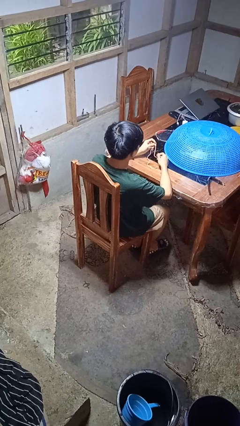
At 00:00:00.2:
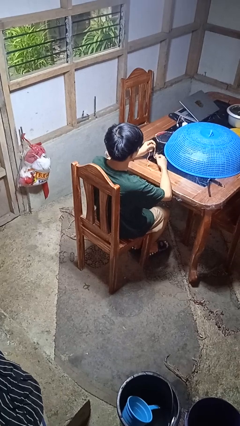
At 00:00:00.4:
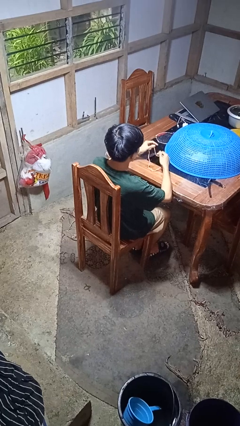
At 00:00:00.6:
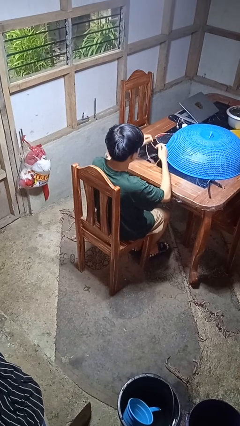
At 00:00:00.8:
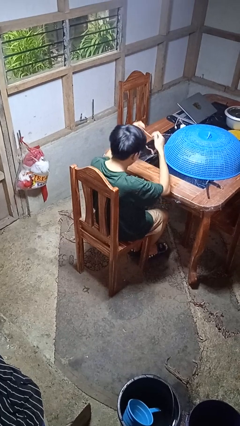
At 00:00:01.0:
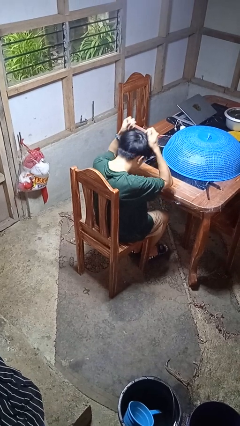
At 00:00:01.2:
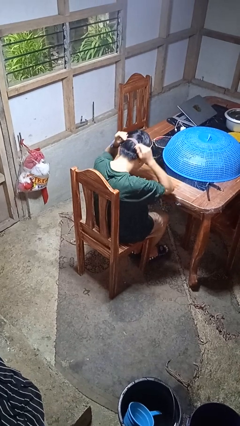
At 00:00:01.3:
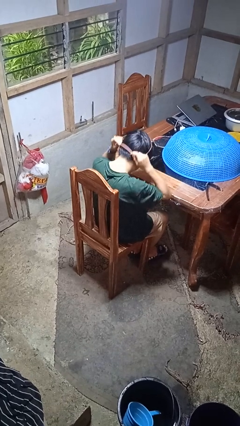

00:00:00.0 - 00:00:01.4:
person puts on necklace

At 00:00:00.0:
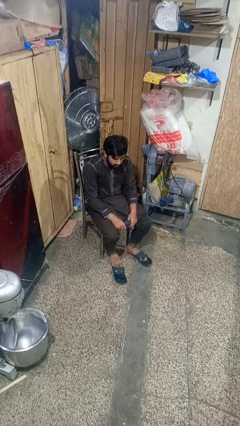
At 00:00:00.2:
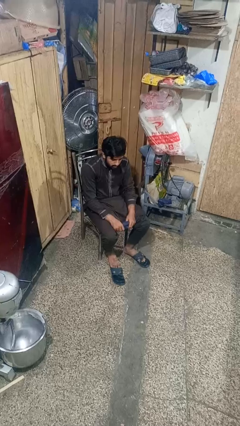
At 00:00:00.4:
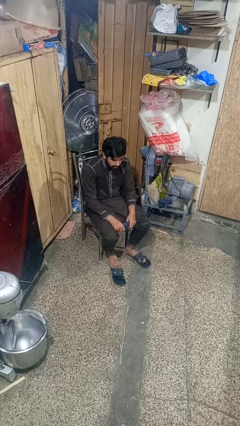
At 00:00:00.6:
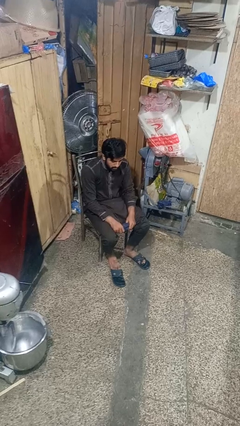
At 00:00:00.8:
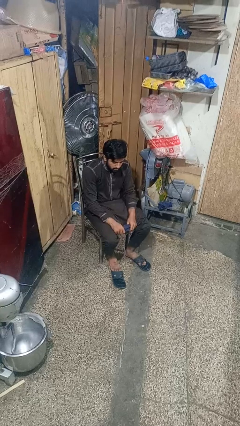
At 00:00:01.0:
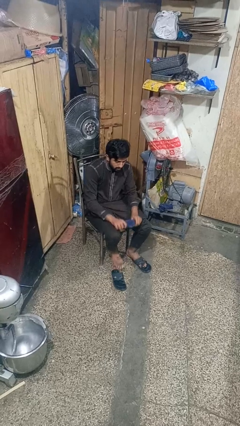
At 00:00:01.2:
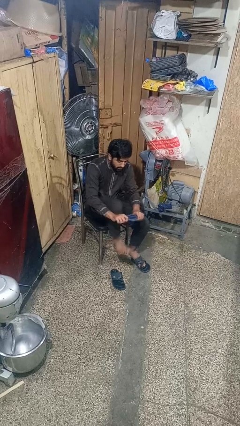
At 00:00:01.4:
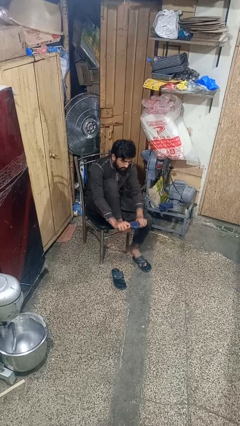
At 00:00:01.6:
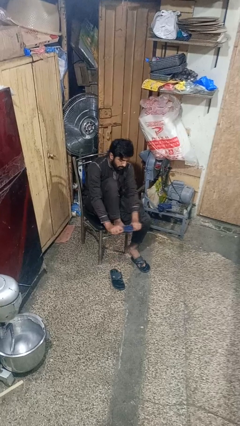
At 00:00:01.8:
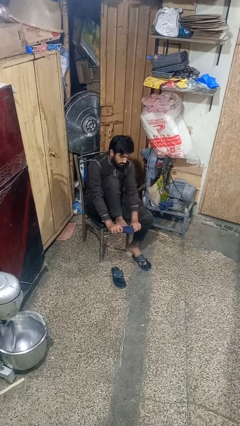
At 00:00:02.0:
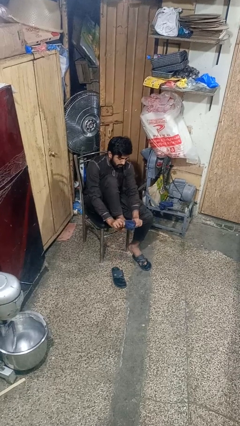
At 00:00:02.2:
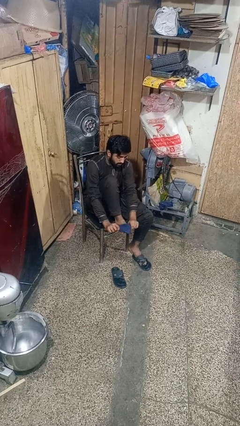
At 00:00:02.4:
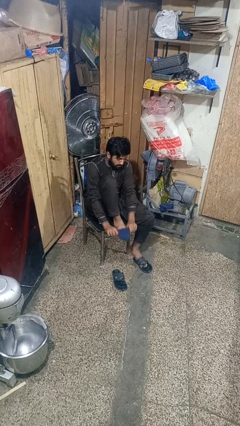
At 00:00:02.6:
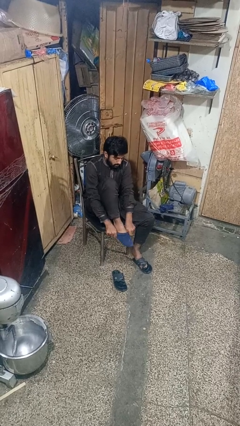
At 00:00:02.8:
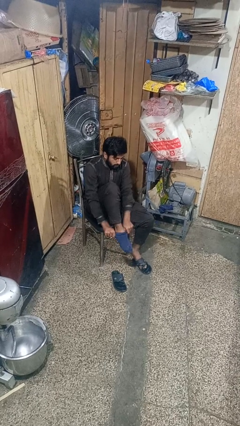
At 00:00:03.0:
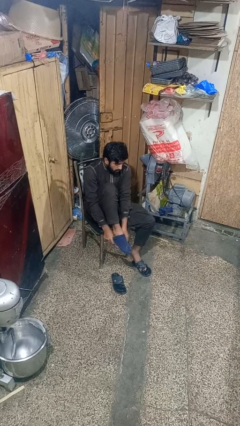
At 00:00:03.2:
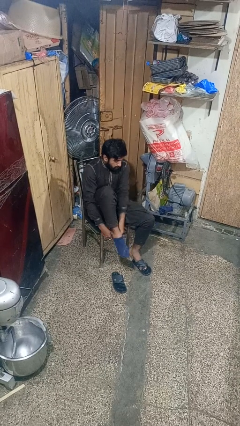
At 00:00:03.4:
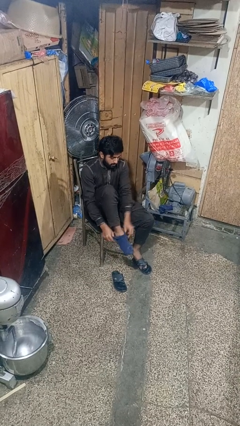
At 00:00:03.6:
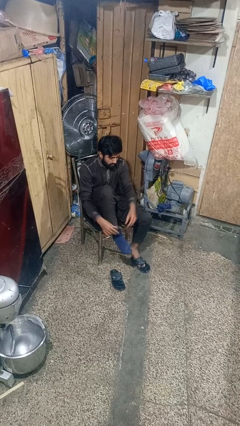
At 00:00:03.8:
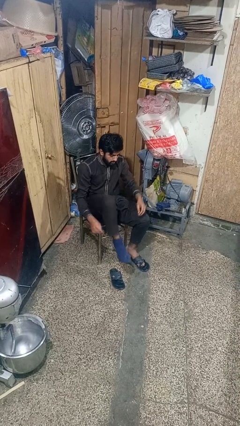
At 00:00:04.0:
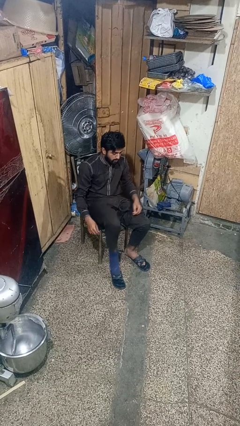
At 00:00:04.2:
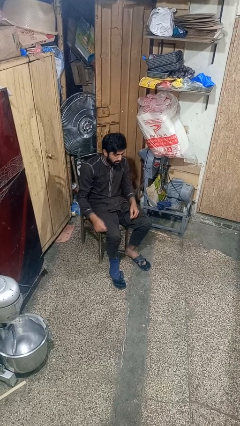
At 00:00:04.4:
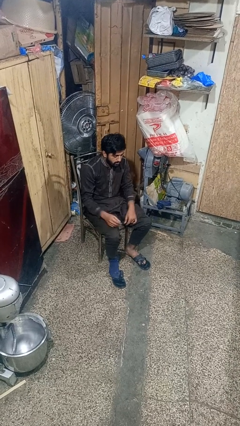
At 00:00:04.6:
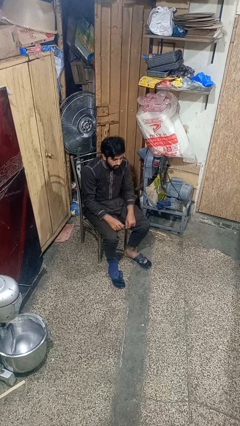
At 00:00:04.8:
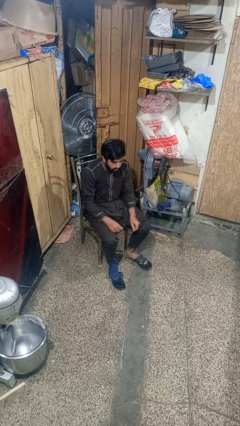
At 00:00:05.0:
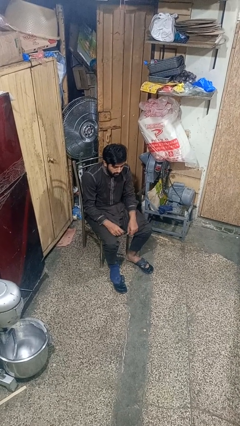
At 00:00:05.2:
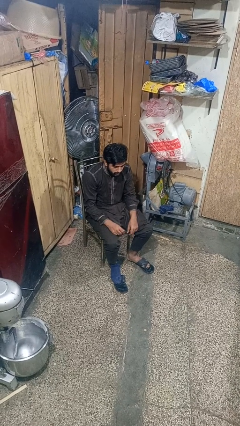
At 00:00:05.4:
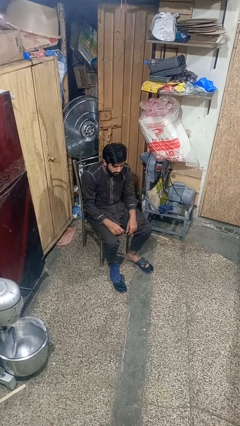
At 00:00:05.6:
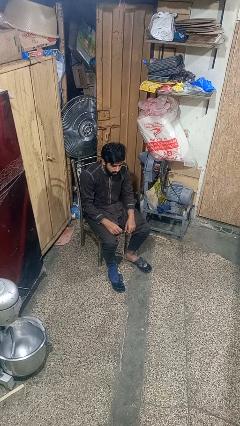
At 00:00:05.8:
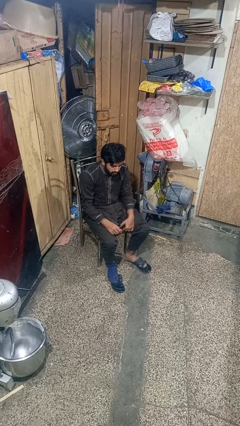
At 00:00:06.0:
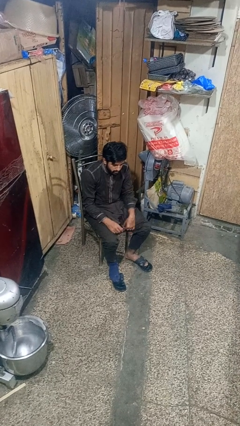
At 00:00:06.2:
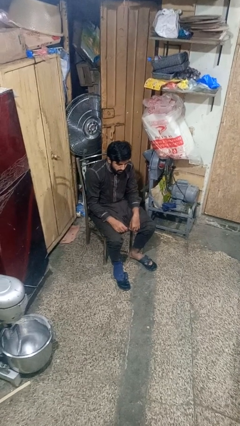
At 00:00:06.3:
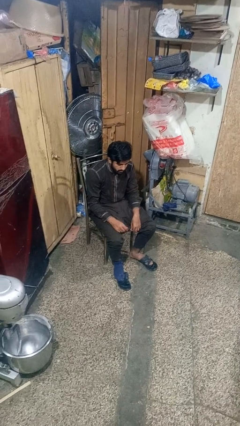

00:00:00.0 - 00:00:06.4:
person puts on socks

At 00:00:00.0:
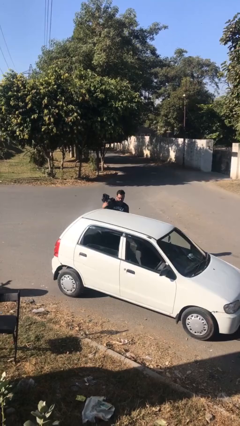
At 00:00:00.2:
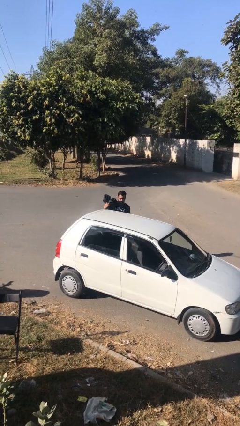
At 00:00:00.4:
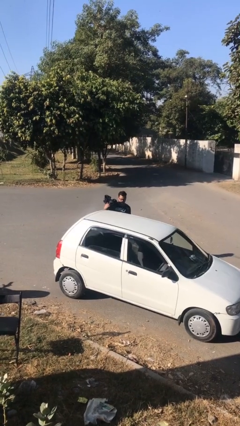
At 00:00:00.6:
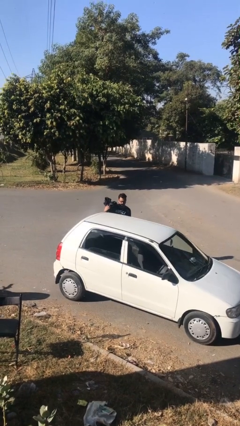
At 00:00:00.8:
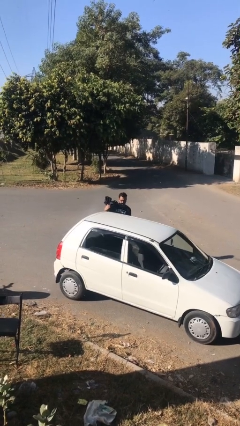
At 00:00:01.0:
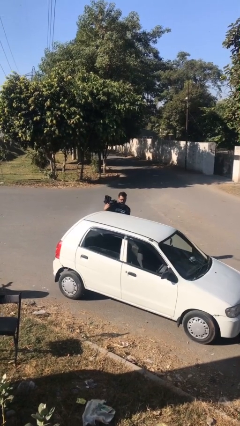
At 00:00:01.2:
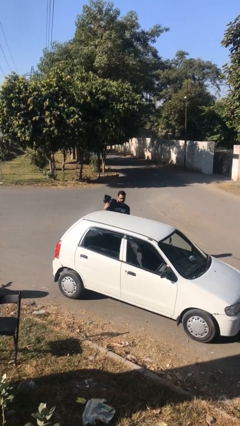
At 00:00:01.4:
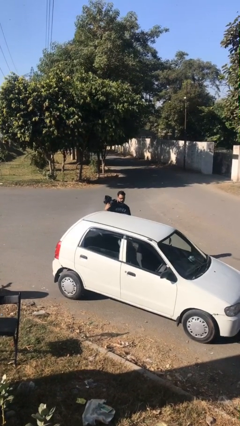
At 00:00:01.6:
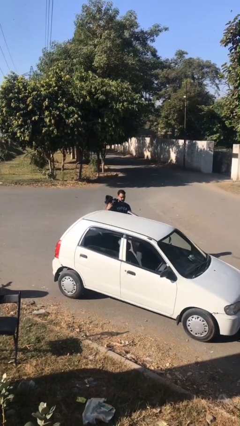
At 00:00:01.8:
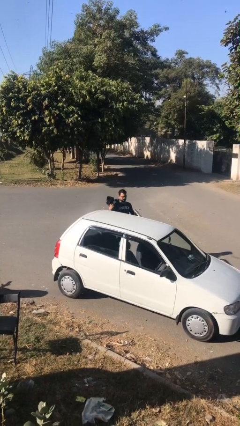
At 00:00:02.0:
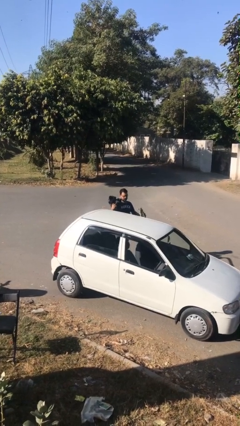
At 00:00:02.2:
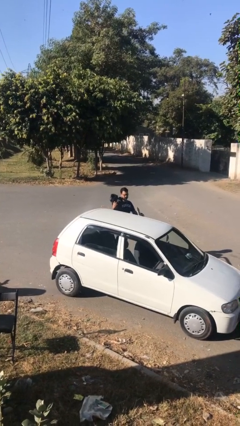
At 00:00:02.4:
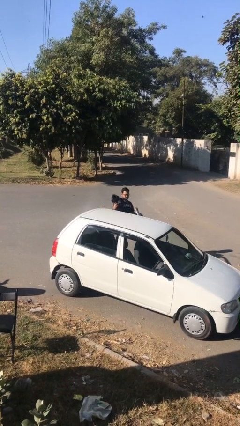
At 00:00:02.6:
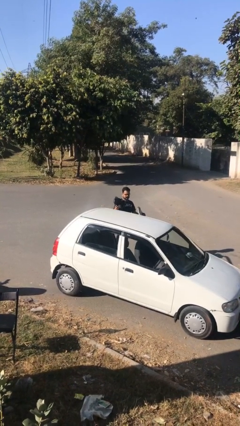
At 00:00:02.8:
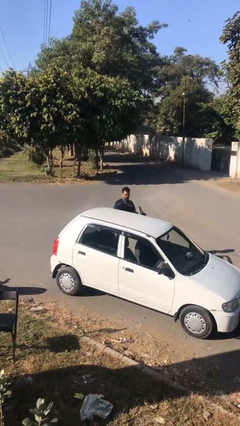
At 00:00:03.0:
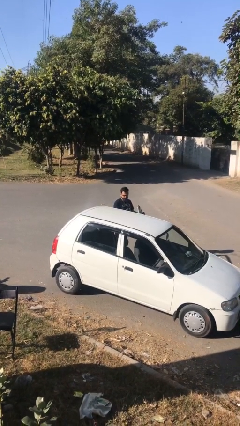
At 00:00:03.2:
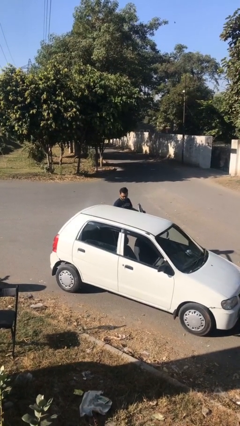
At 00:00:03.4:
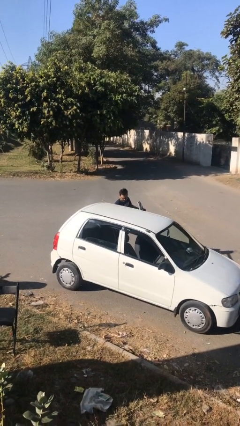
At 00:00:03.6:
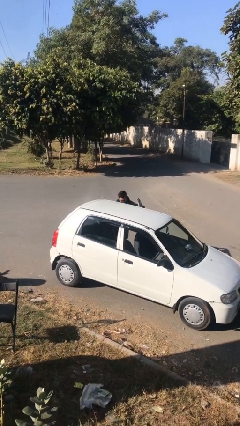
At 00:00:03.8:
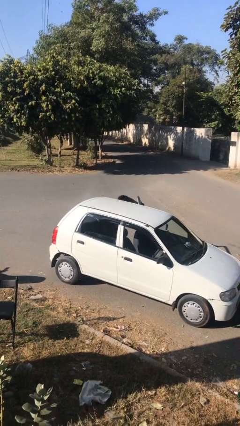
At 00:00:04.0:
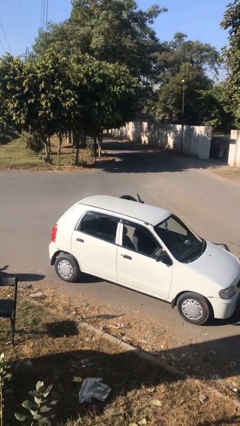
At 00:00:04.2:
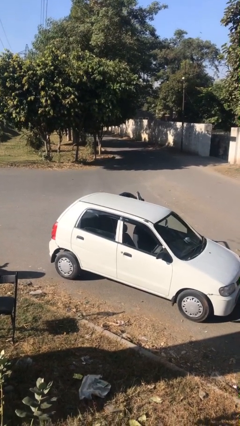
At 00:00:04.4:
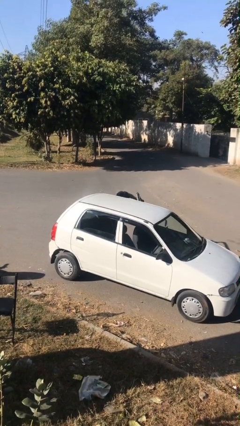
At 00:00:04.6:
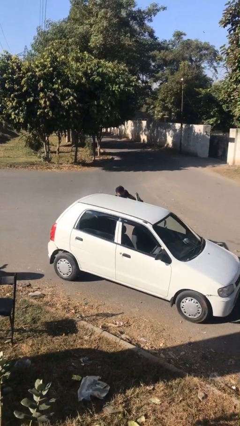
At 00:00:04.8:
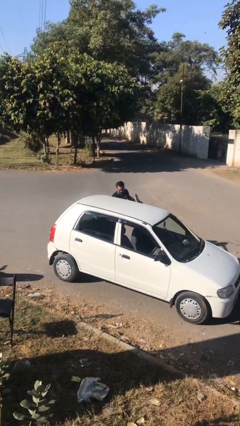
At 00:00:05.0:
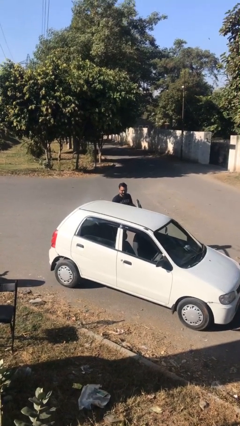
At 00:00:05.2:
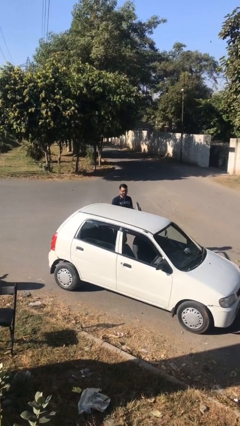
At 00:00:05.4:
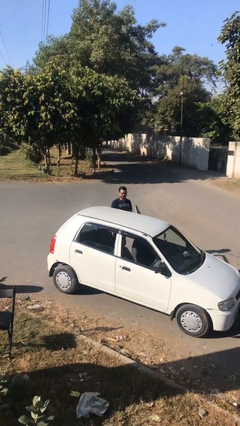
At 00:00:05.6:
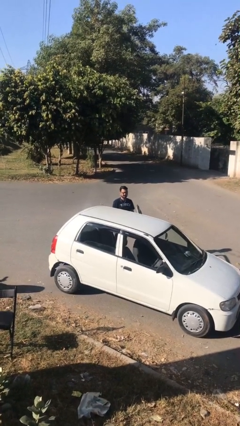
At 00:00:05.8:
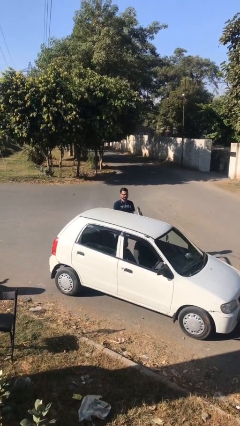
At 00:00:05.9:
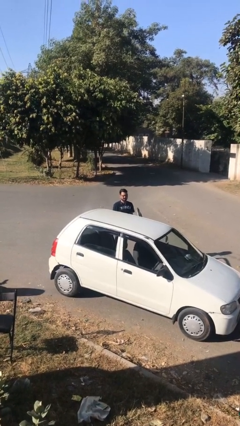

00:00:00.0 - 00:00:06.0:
person loads car

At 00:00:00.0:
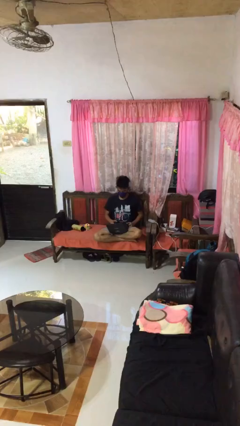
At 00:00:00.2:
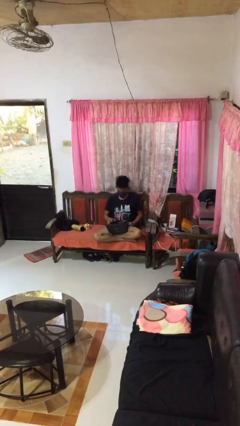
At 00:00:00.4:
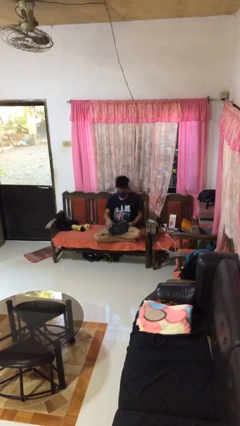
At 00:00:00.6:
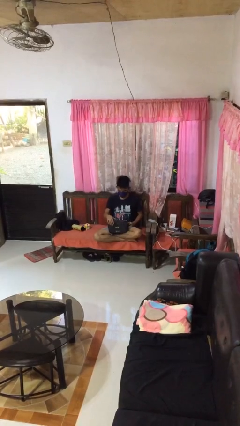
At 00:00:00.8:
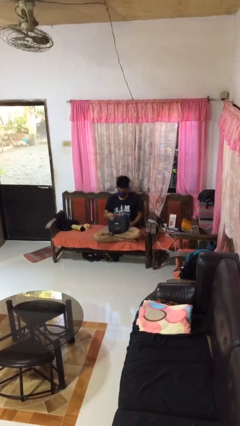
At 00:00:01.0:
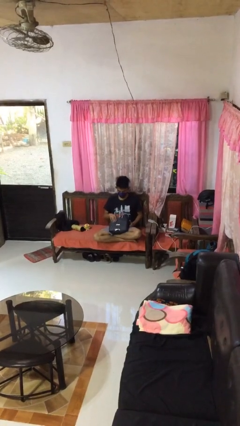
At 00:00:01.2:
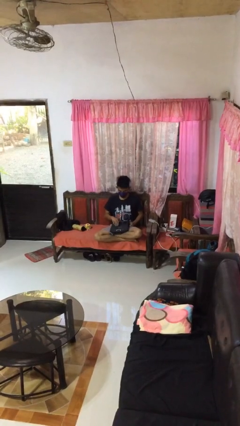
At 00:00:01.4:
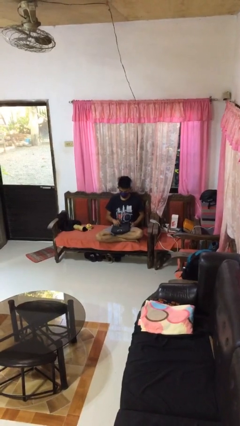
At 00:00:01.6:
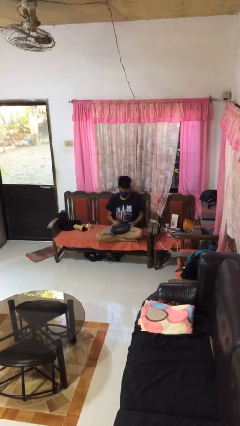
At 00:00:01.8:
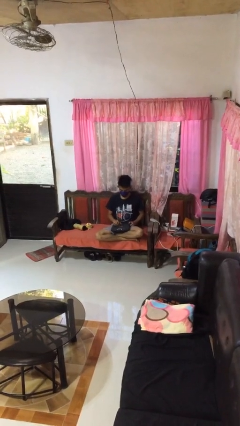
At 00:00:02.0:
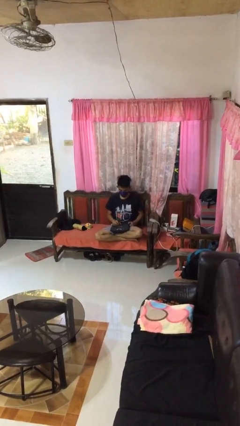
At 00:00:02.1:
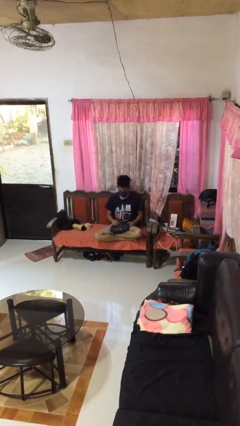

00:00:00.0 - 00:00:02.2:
person closes laptop

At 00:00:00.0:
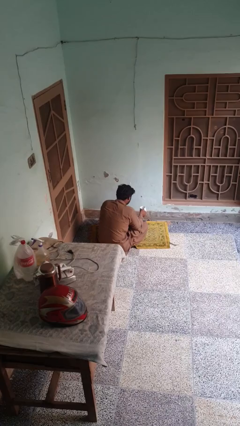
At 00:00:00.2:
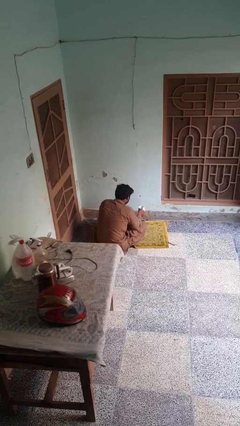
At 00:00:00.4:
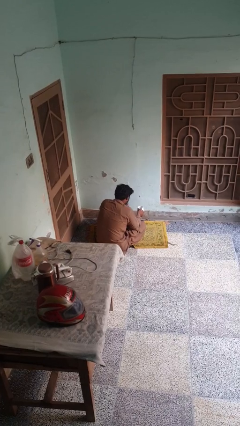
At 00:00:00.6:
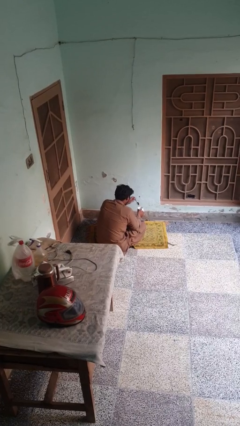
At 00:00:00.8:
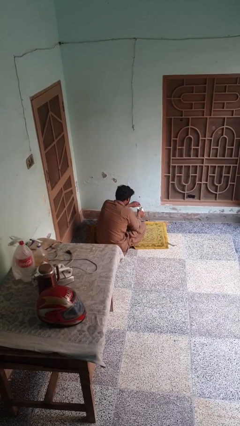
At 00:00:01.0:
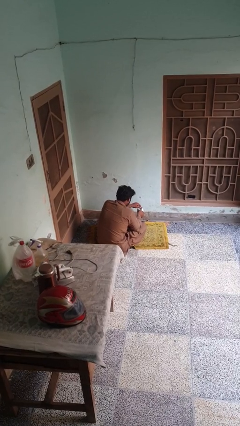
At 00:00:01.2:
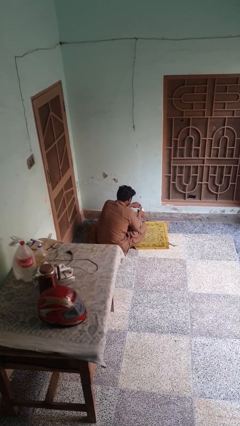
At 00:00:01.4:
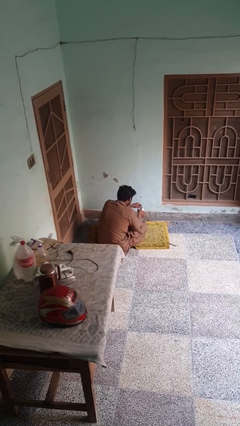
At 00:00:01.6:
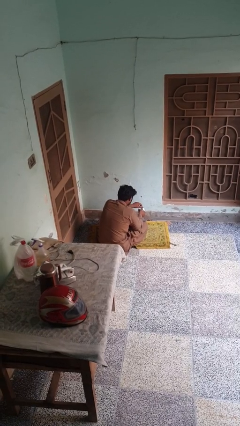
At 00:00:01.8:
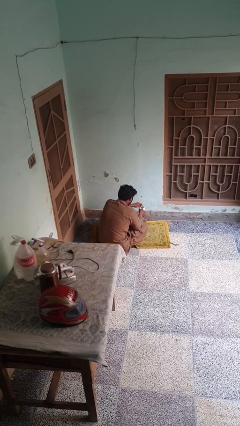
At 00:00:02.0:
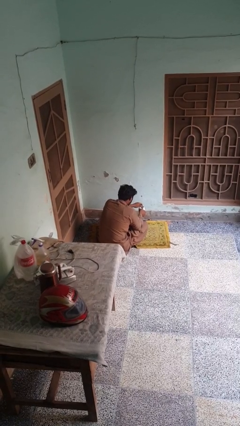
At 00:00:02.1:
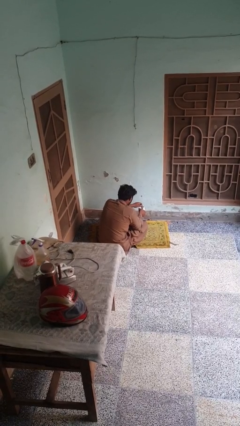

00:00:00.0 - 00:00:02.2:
person stirs mug
